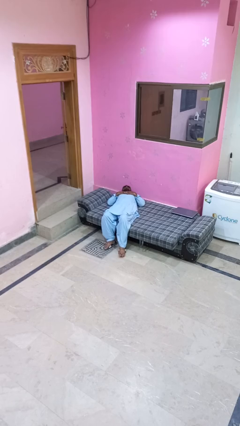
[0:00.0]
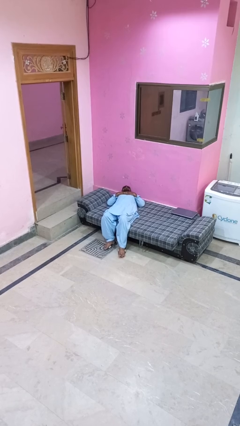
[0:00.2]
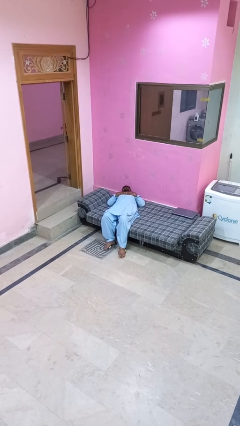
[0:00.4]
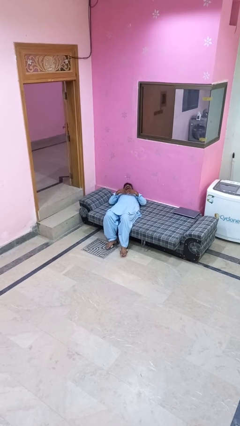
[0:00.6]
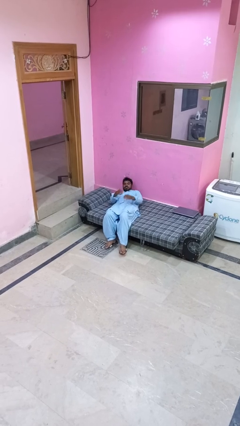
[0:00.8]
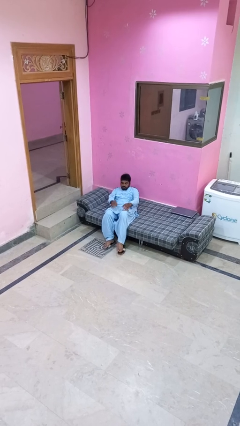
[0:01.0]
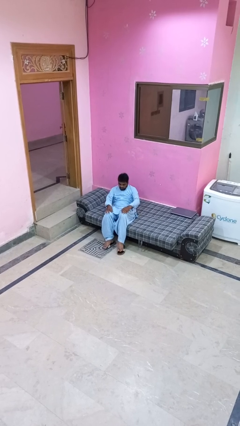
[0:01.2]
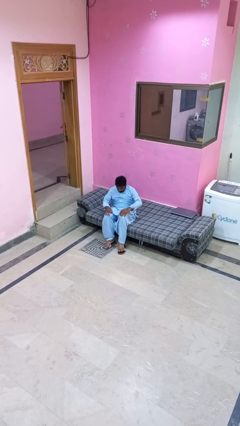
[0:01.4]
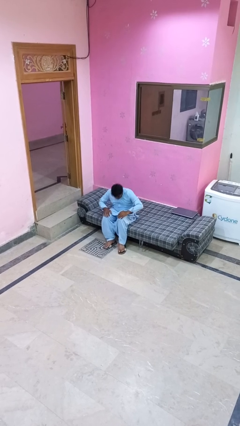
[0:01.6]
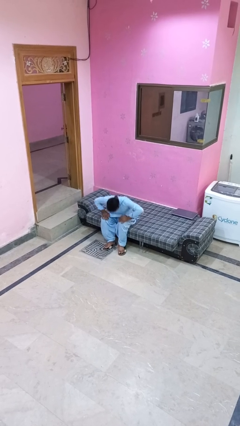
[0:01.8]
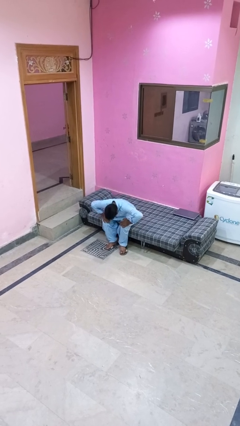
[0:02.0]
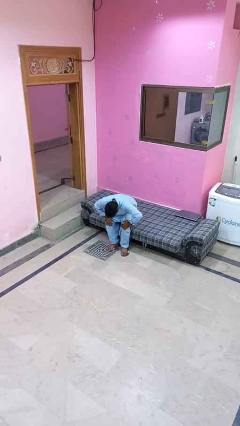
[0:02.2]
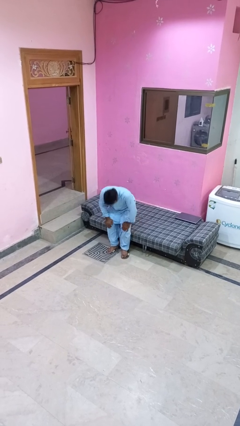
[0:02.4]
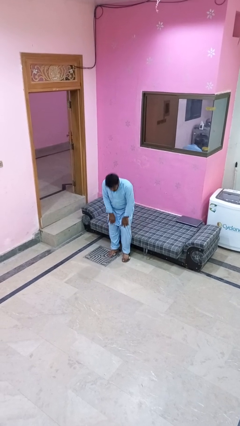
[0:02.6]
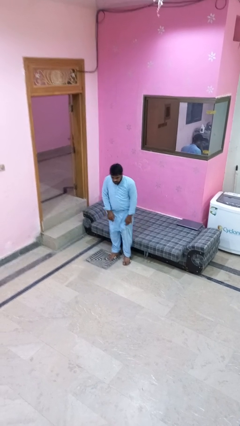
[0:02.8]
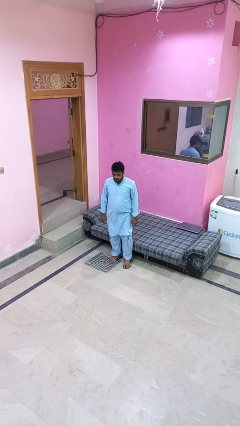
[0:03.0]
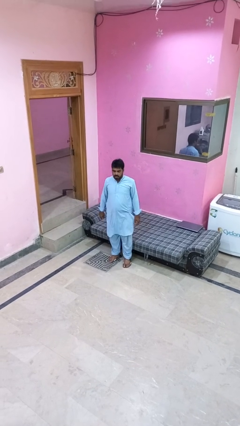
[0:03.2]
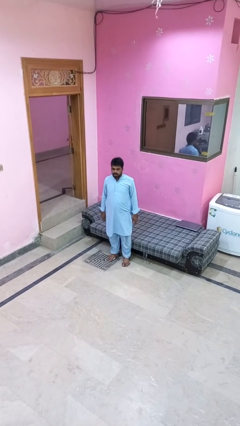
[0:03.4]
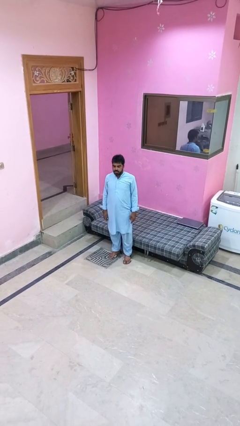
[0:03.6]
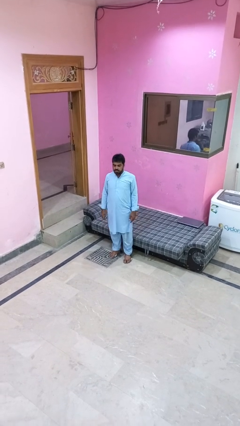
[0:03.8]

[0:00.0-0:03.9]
person stands up

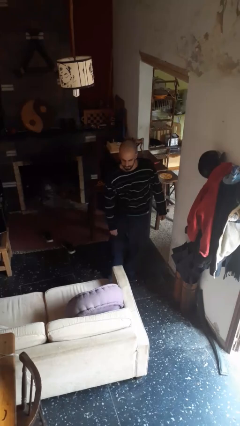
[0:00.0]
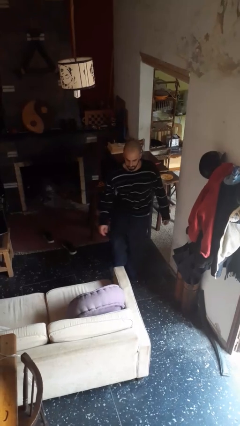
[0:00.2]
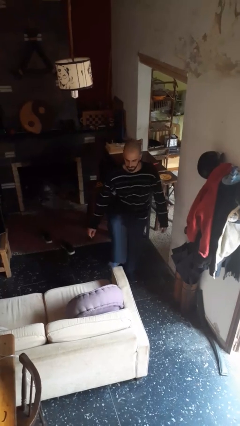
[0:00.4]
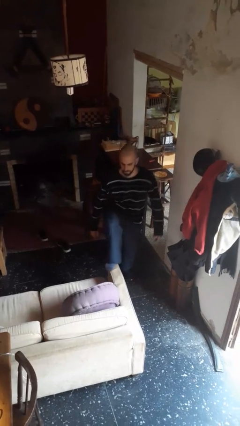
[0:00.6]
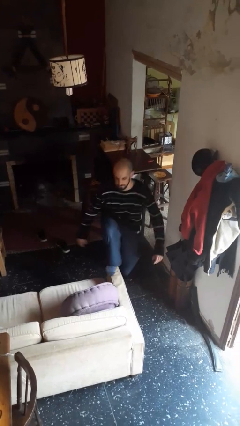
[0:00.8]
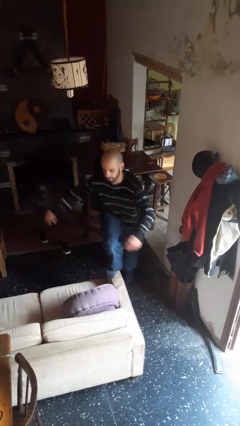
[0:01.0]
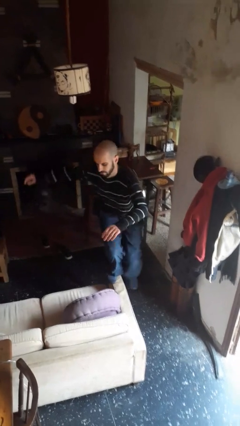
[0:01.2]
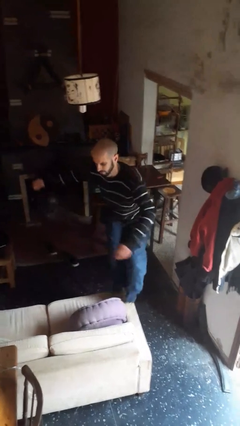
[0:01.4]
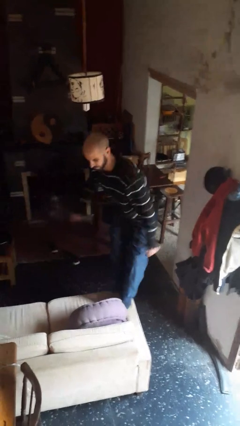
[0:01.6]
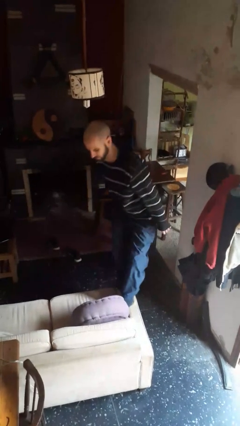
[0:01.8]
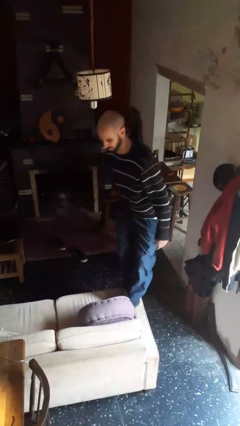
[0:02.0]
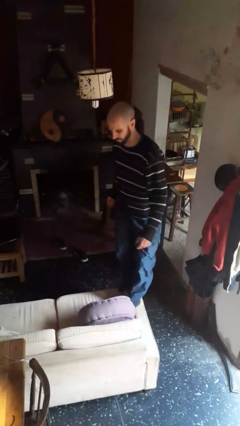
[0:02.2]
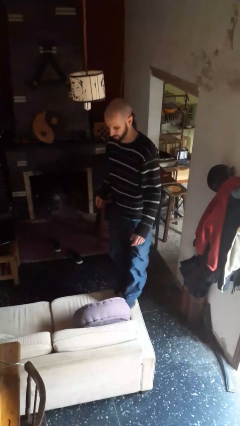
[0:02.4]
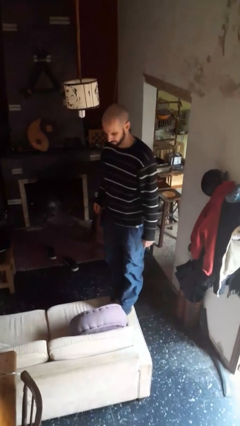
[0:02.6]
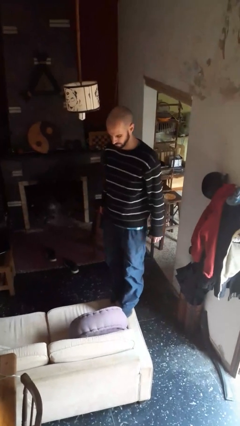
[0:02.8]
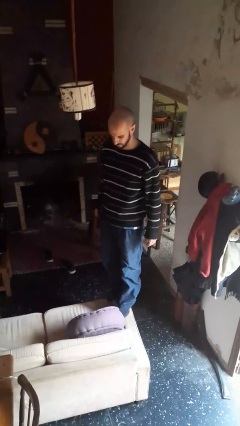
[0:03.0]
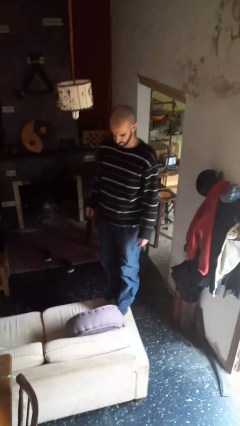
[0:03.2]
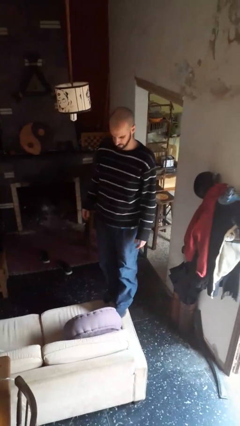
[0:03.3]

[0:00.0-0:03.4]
person climbs on couch

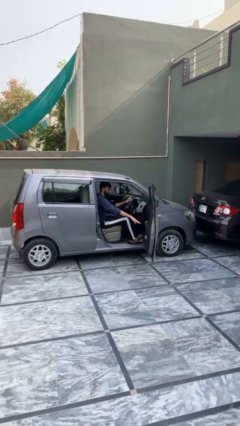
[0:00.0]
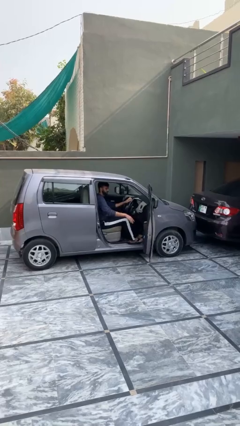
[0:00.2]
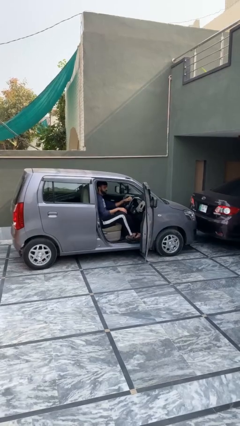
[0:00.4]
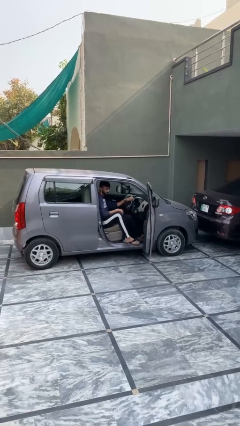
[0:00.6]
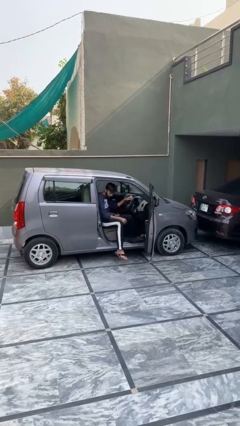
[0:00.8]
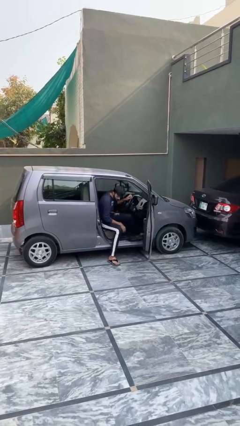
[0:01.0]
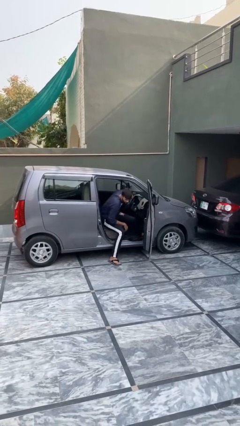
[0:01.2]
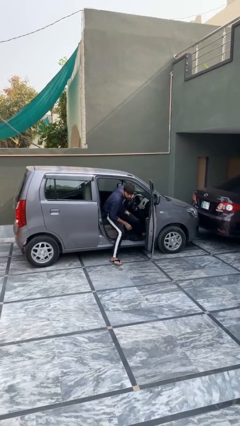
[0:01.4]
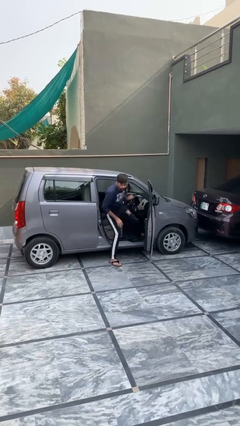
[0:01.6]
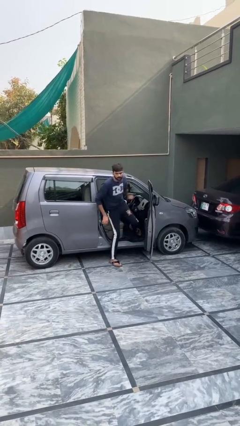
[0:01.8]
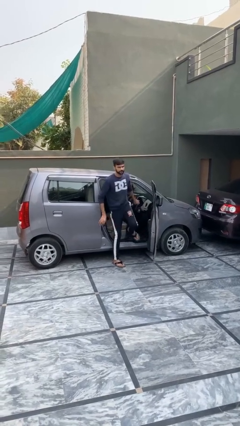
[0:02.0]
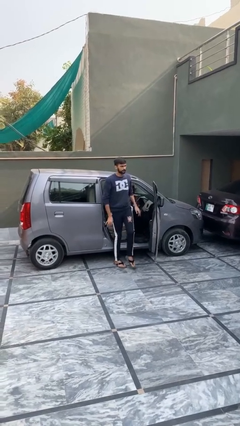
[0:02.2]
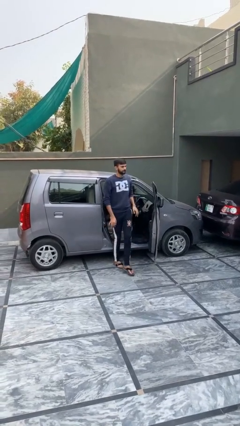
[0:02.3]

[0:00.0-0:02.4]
person exits car

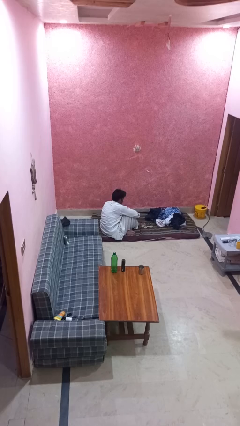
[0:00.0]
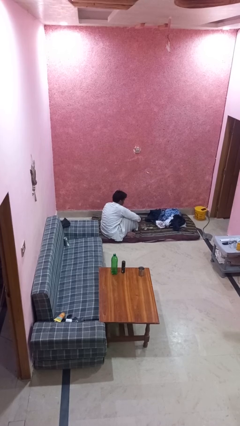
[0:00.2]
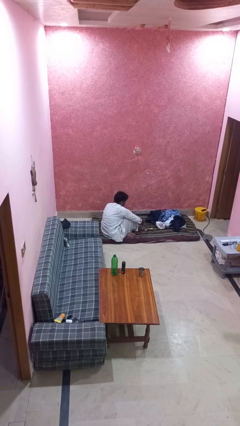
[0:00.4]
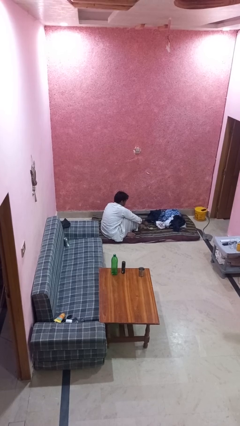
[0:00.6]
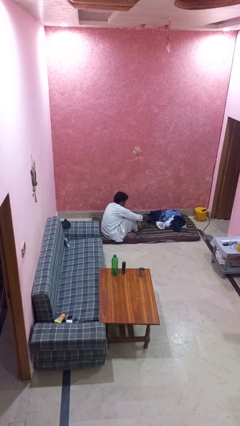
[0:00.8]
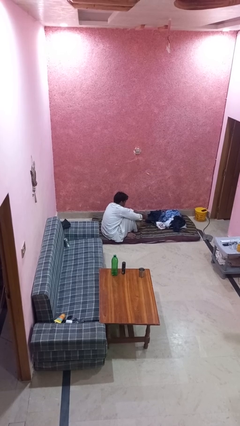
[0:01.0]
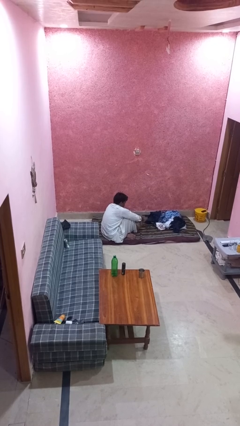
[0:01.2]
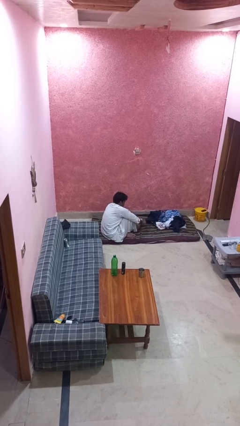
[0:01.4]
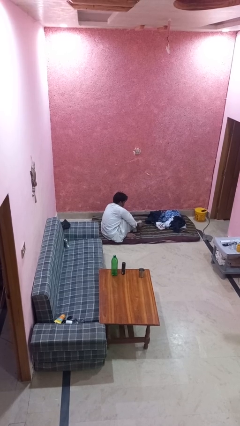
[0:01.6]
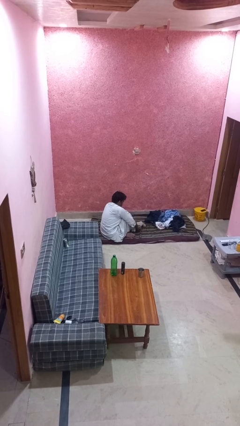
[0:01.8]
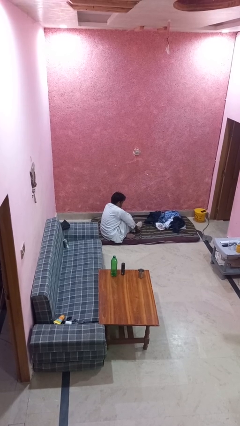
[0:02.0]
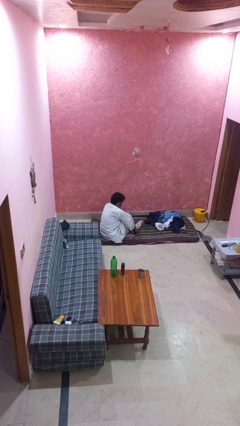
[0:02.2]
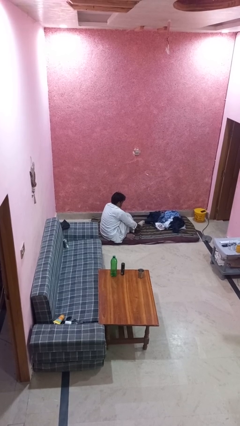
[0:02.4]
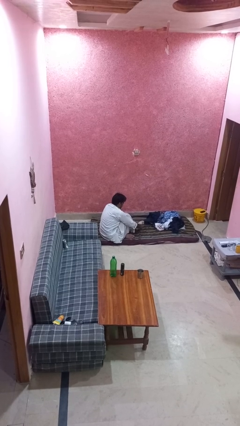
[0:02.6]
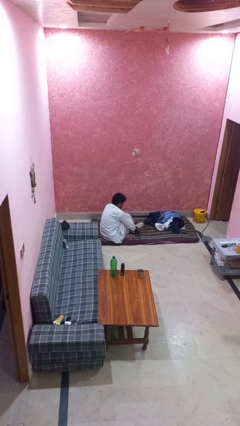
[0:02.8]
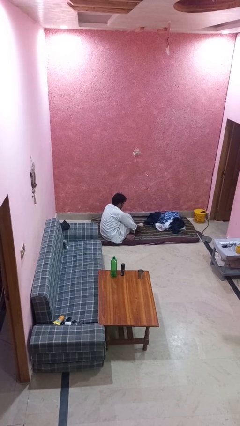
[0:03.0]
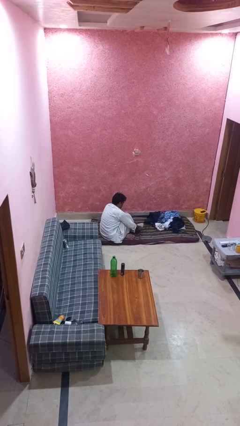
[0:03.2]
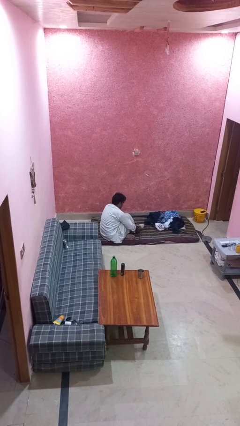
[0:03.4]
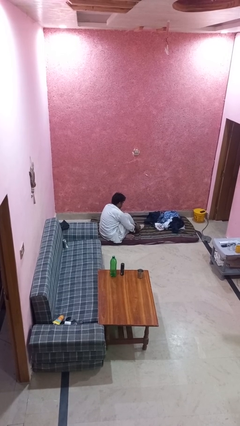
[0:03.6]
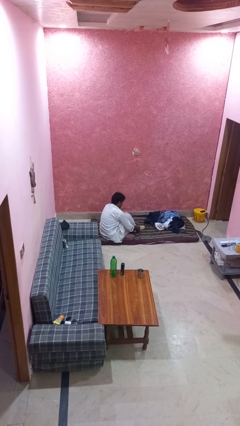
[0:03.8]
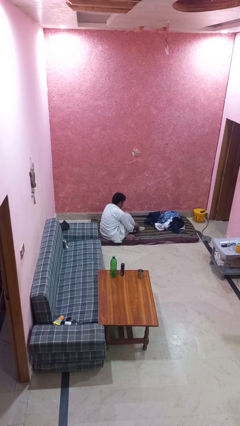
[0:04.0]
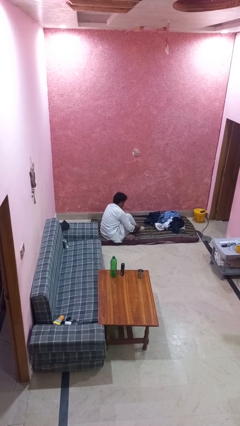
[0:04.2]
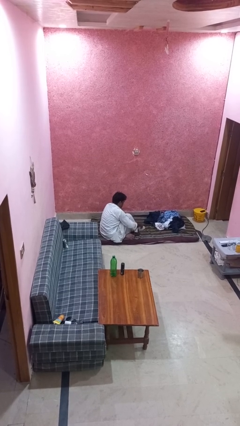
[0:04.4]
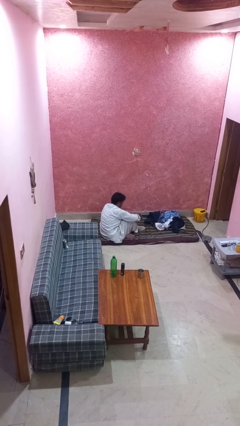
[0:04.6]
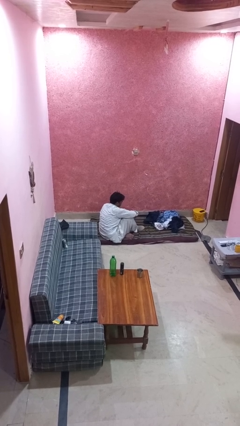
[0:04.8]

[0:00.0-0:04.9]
person puts on socks

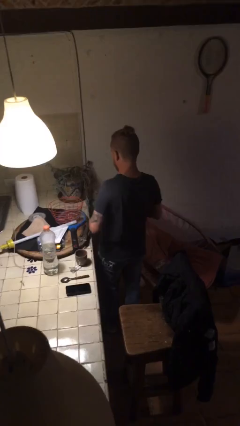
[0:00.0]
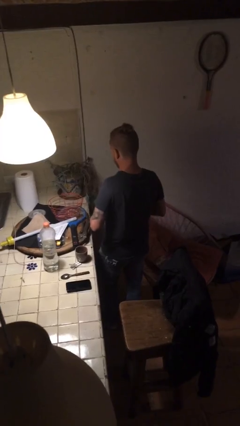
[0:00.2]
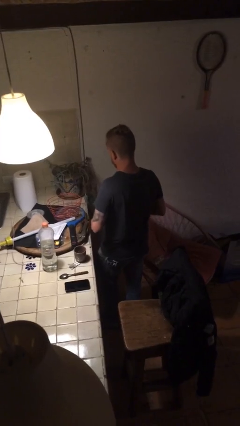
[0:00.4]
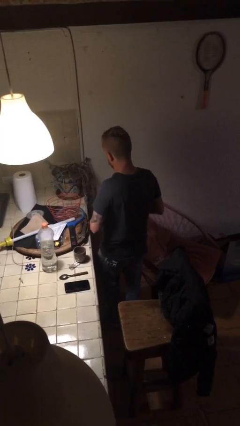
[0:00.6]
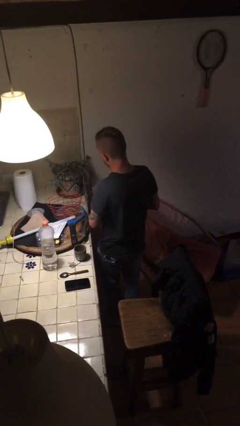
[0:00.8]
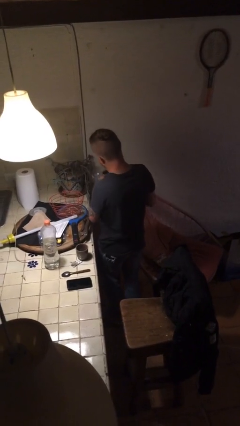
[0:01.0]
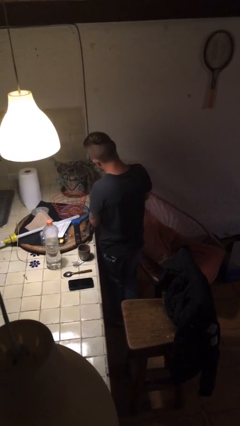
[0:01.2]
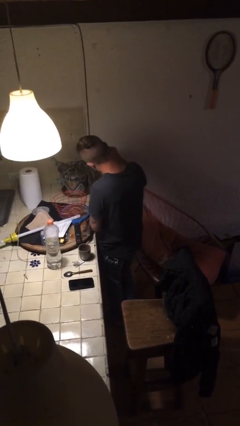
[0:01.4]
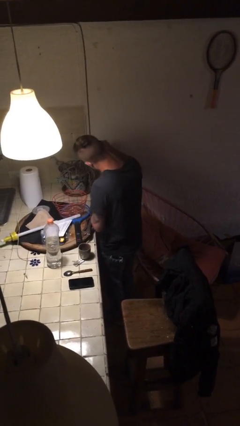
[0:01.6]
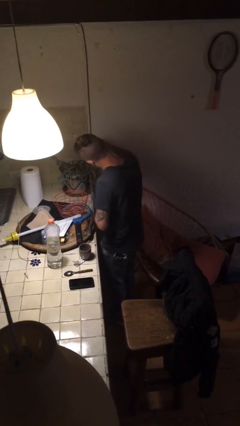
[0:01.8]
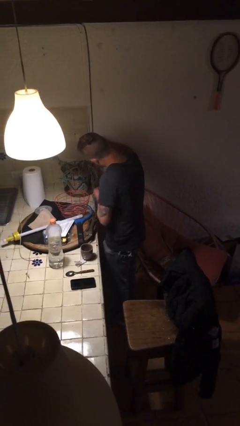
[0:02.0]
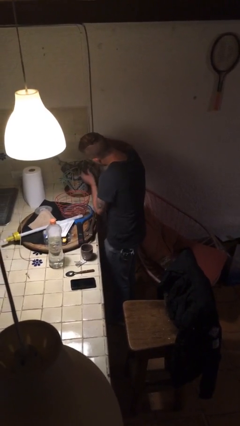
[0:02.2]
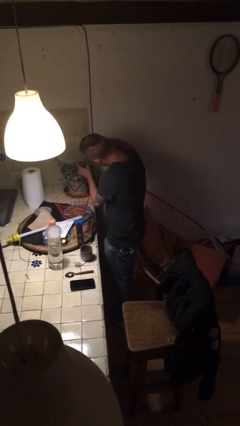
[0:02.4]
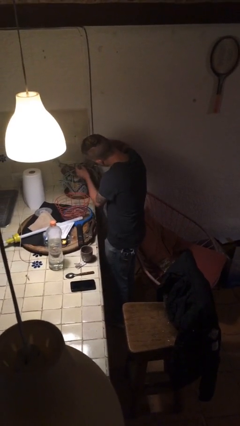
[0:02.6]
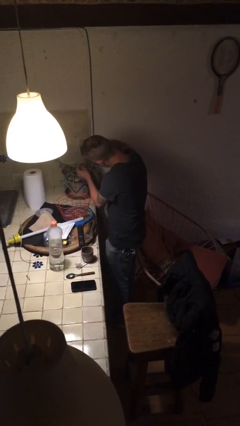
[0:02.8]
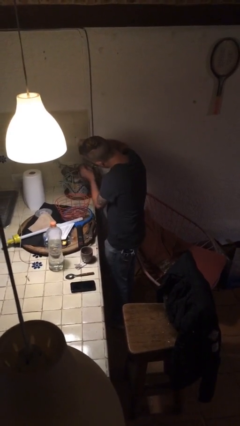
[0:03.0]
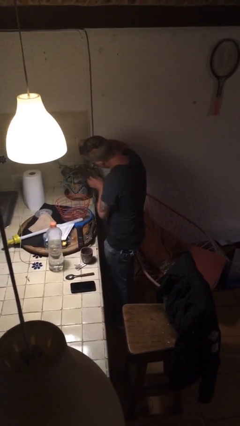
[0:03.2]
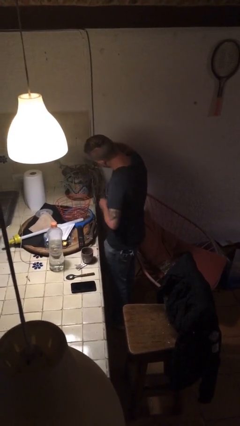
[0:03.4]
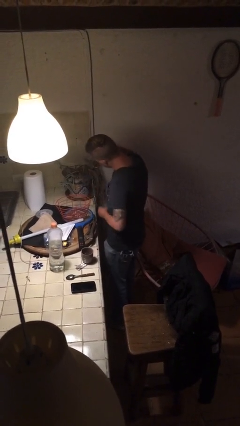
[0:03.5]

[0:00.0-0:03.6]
person waters houseplant
